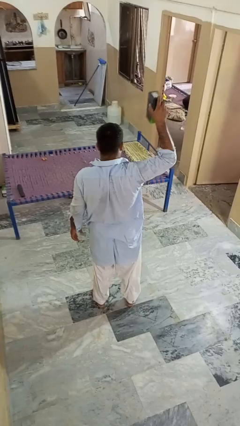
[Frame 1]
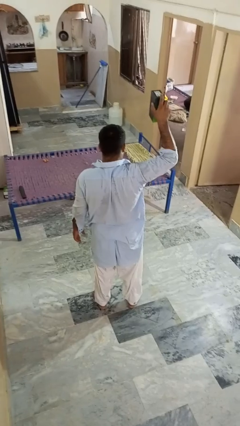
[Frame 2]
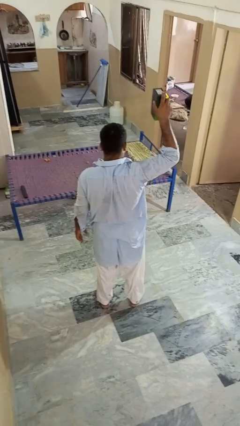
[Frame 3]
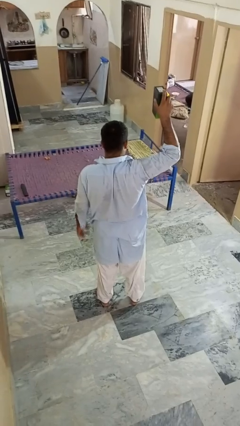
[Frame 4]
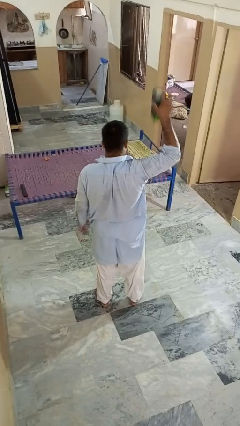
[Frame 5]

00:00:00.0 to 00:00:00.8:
person drops object

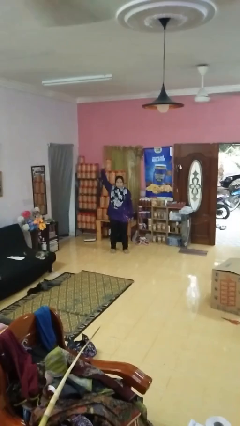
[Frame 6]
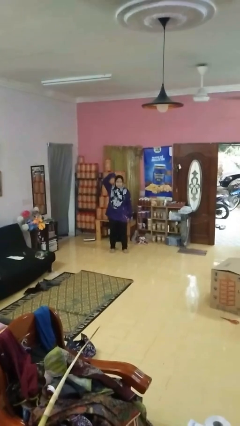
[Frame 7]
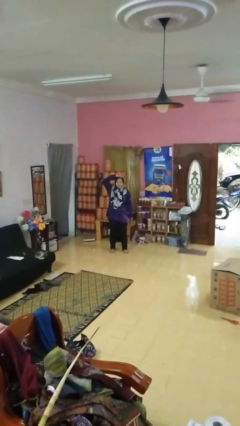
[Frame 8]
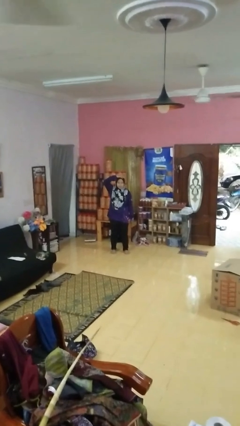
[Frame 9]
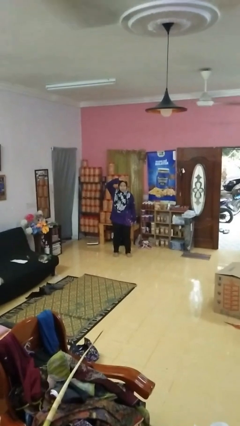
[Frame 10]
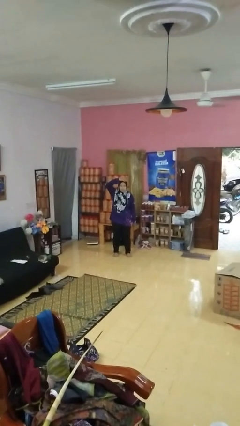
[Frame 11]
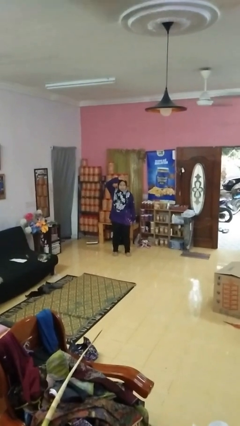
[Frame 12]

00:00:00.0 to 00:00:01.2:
person pats head

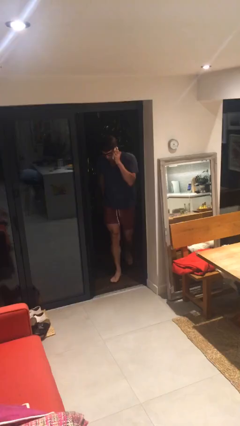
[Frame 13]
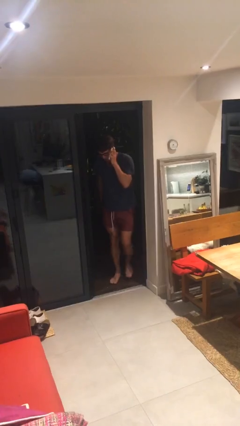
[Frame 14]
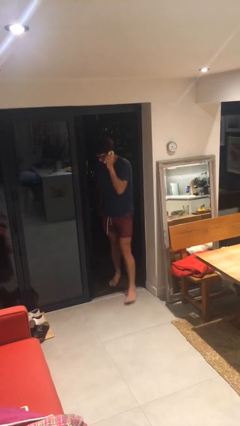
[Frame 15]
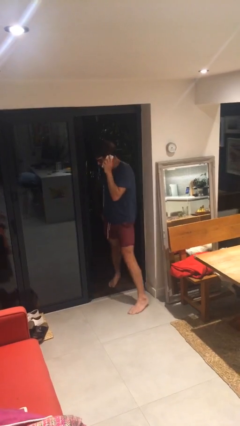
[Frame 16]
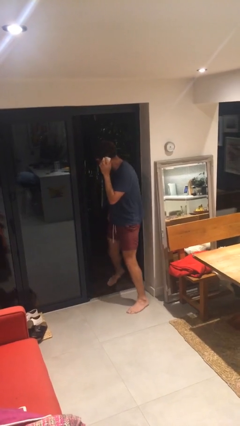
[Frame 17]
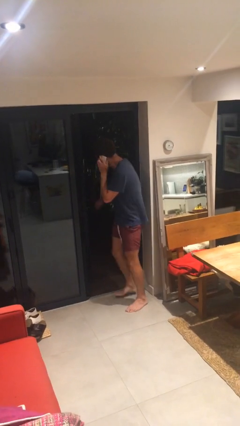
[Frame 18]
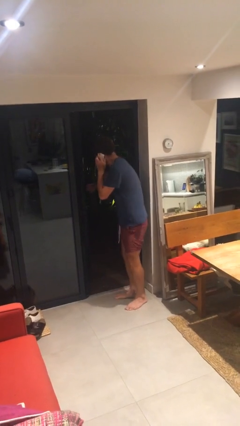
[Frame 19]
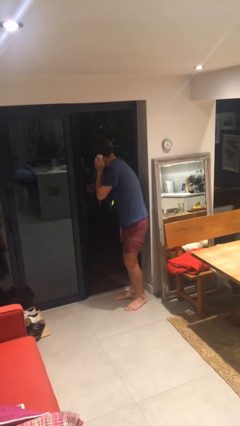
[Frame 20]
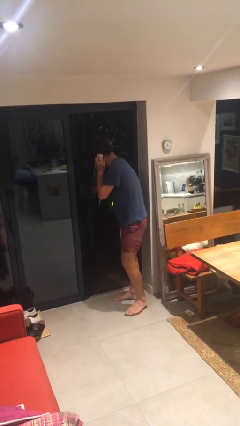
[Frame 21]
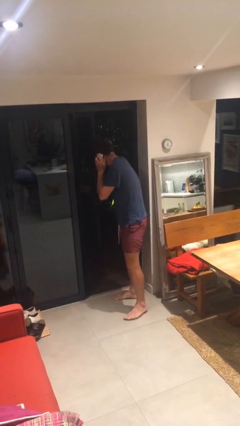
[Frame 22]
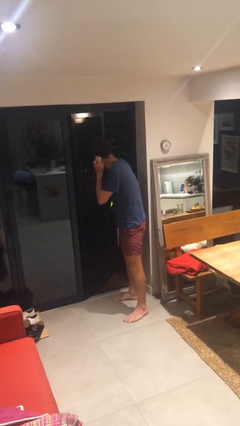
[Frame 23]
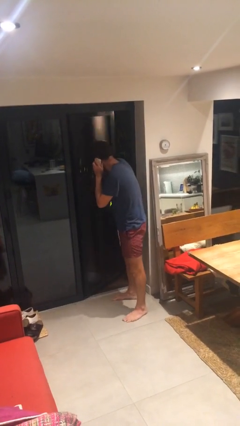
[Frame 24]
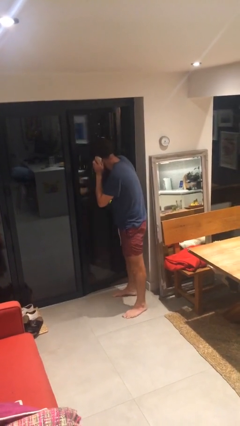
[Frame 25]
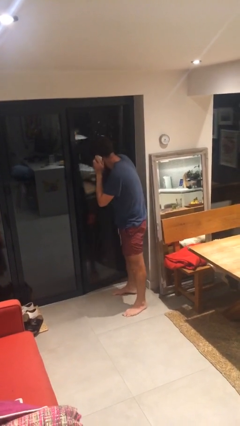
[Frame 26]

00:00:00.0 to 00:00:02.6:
person enters scene through structure

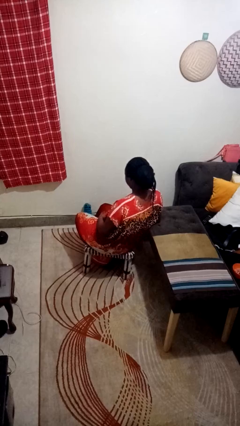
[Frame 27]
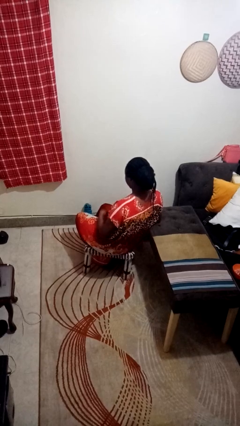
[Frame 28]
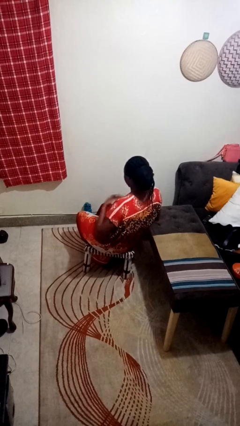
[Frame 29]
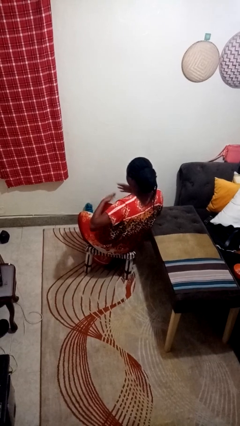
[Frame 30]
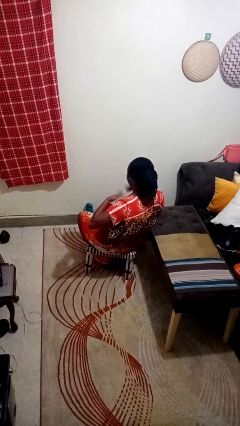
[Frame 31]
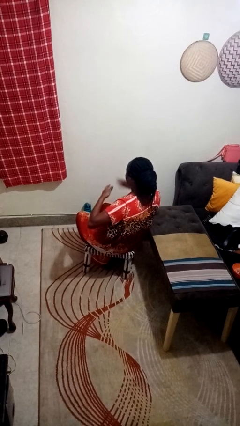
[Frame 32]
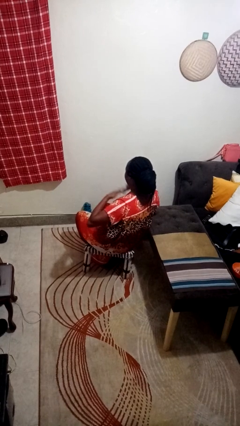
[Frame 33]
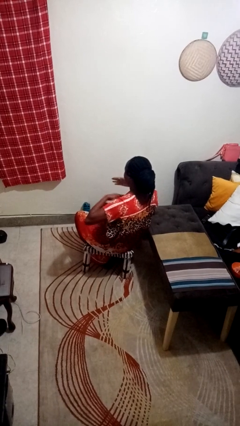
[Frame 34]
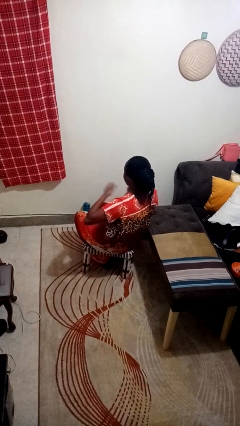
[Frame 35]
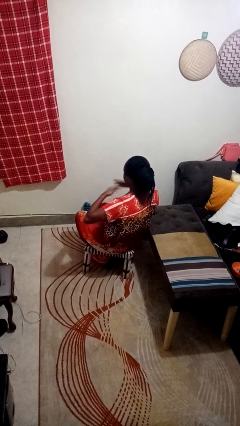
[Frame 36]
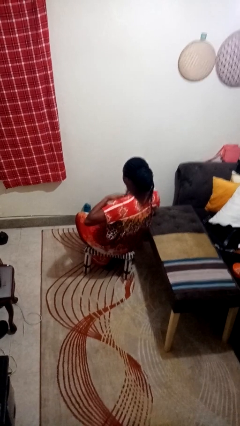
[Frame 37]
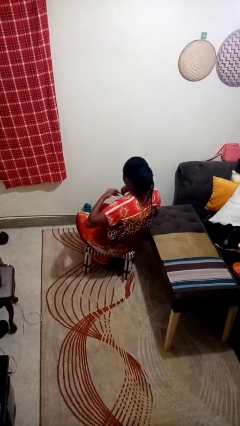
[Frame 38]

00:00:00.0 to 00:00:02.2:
person drums on chest

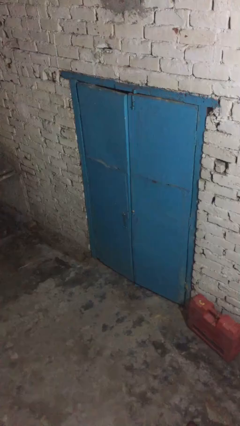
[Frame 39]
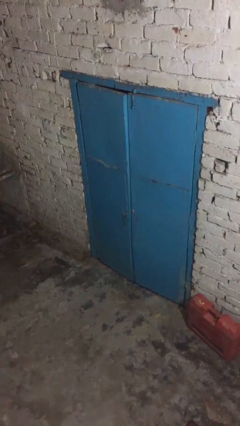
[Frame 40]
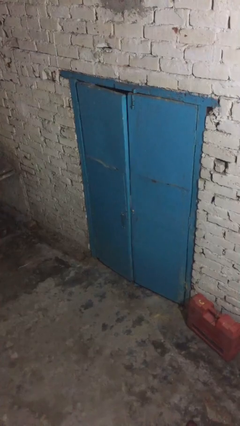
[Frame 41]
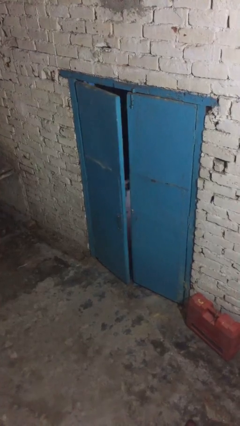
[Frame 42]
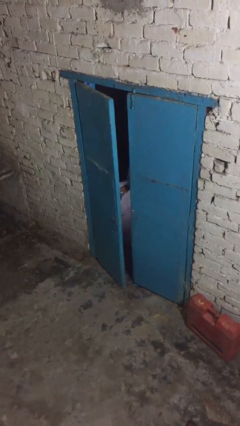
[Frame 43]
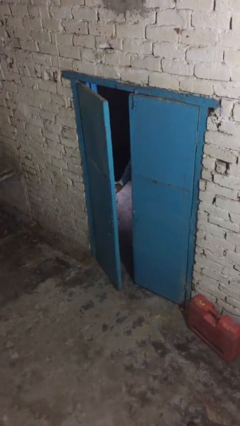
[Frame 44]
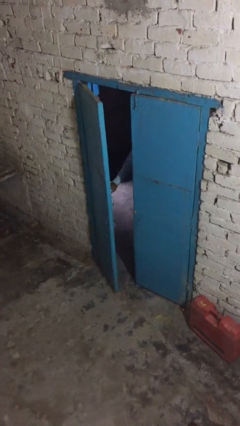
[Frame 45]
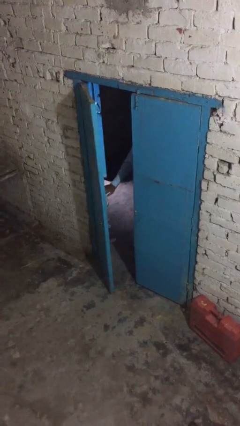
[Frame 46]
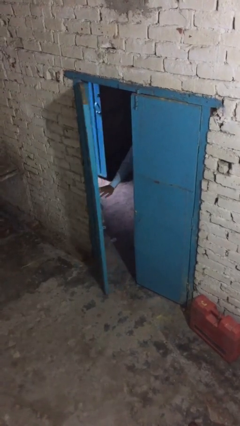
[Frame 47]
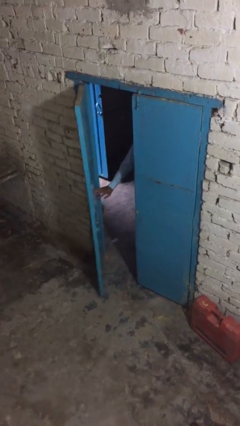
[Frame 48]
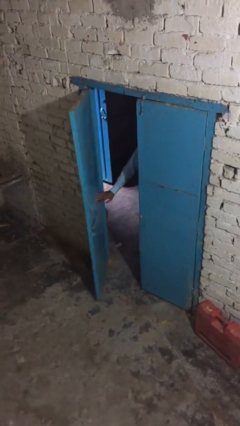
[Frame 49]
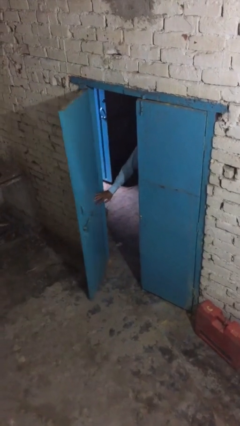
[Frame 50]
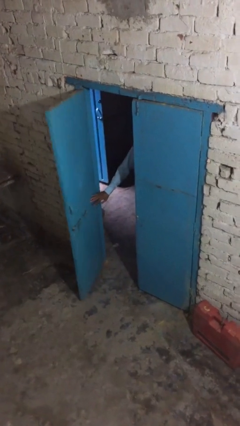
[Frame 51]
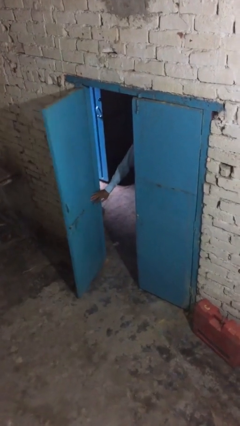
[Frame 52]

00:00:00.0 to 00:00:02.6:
person opens facility door

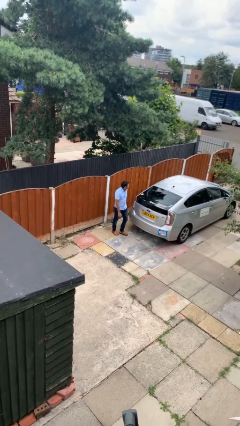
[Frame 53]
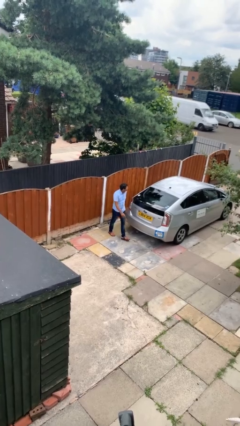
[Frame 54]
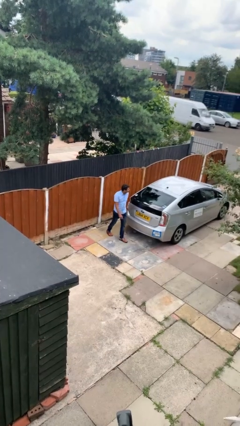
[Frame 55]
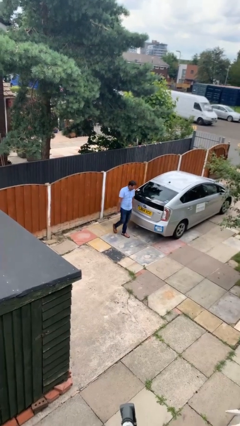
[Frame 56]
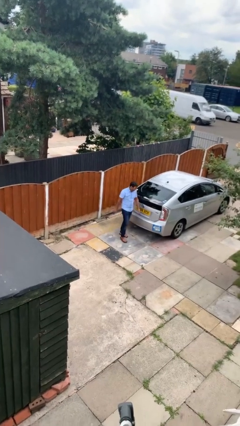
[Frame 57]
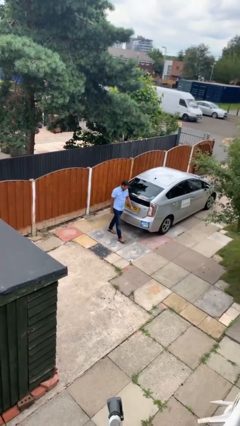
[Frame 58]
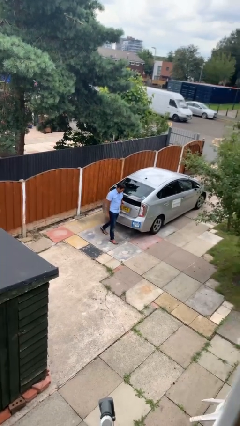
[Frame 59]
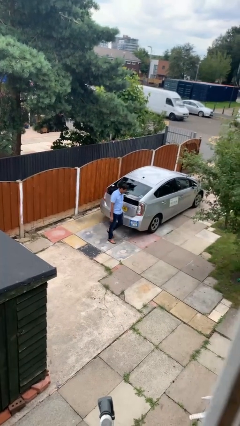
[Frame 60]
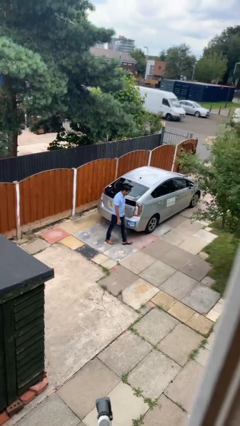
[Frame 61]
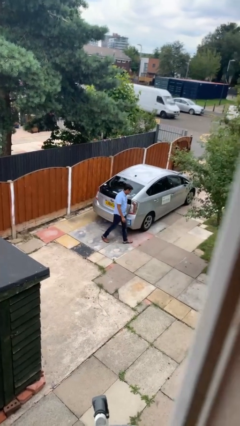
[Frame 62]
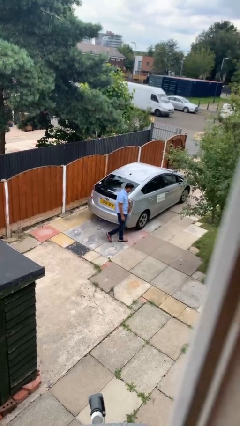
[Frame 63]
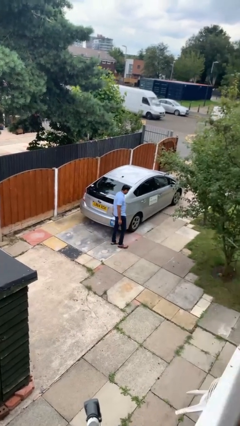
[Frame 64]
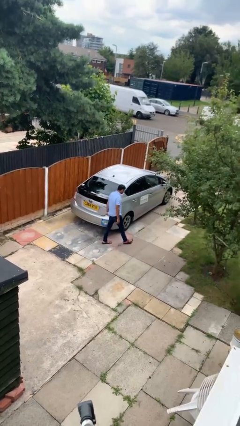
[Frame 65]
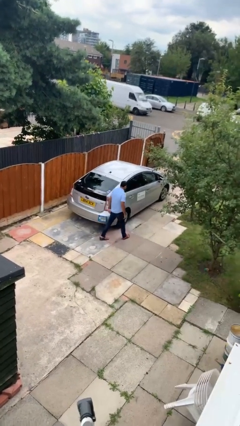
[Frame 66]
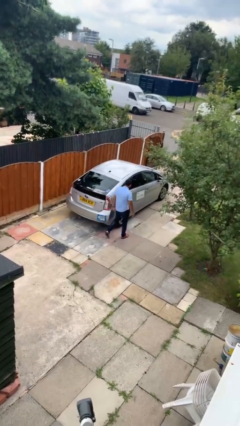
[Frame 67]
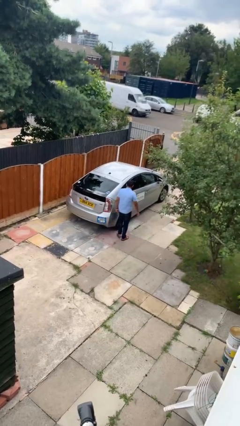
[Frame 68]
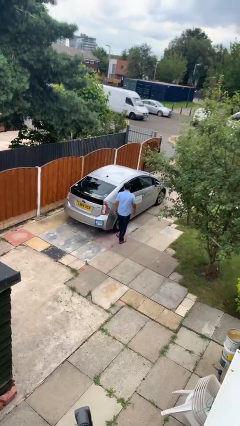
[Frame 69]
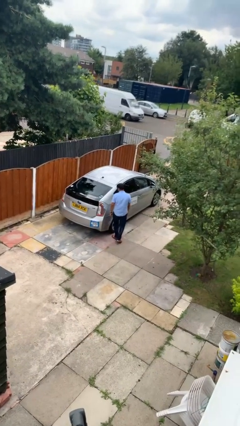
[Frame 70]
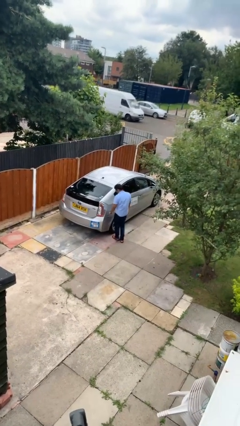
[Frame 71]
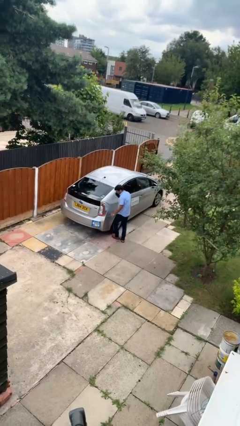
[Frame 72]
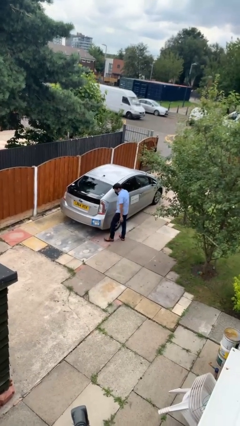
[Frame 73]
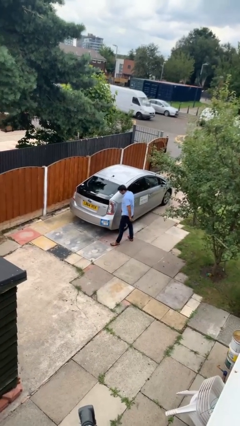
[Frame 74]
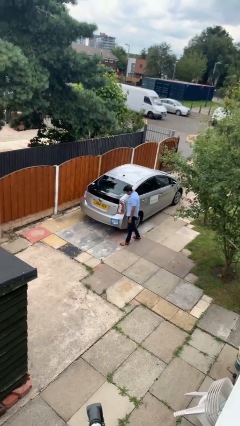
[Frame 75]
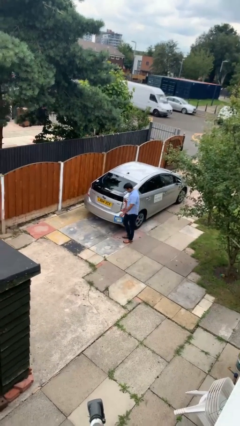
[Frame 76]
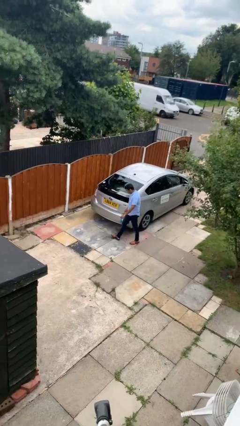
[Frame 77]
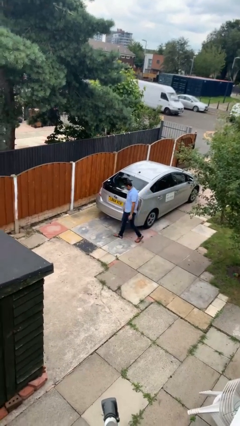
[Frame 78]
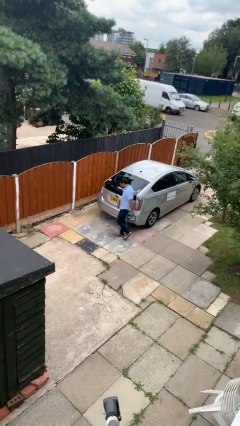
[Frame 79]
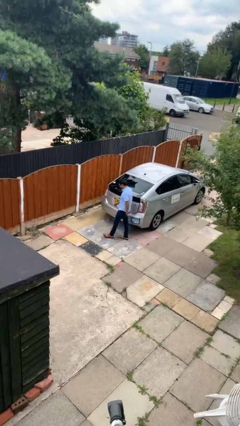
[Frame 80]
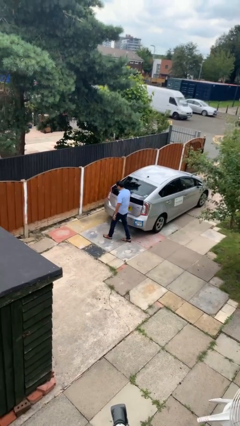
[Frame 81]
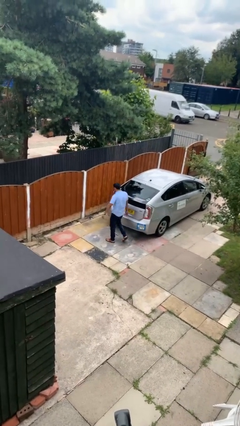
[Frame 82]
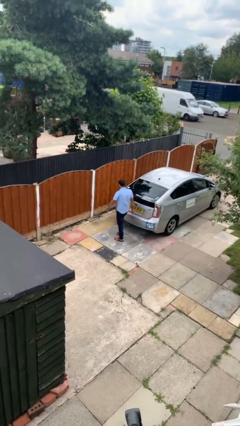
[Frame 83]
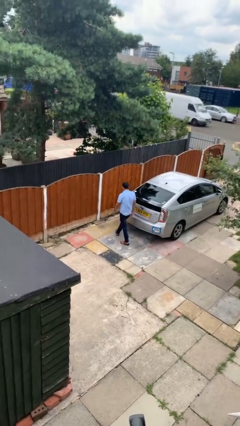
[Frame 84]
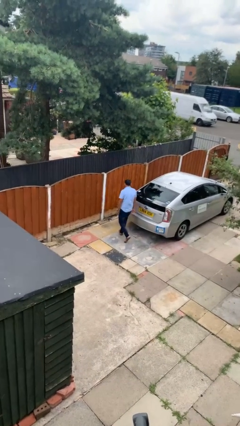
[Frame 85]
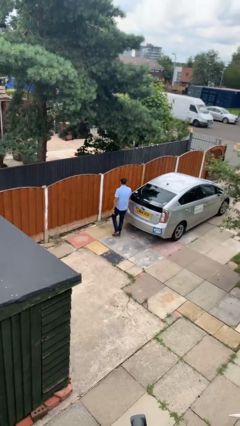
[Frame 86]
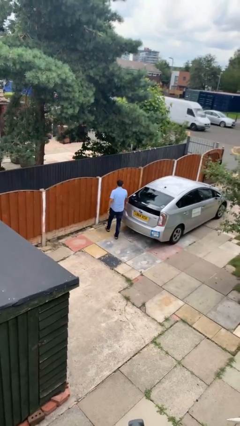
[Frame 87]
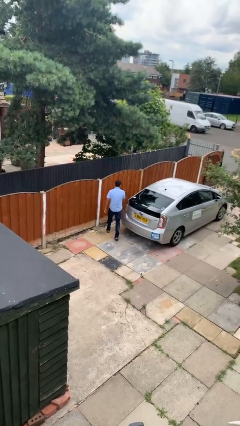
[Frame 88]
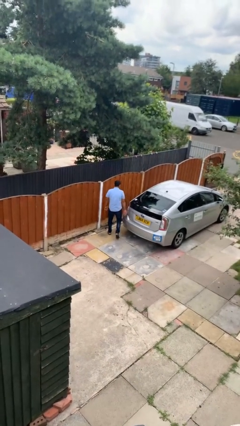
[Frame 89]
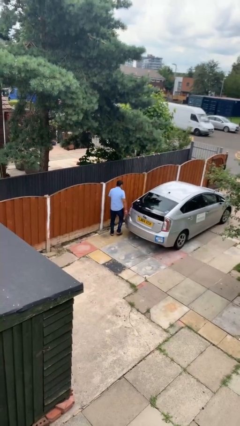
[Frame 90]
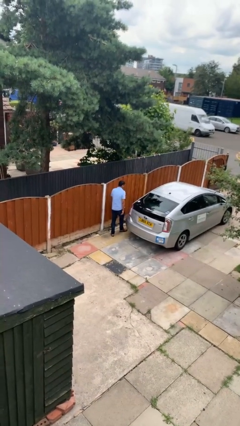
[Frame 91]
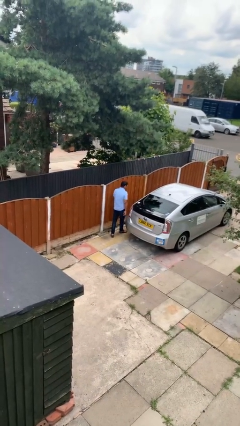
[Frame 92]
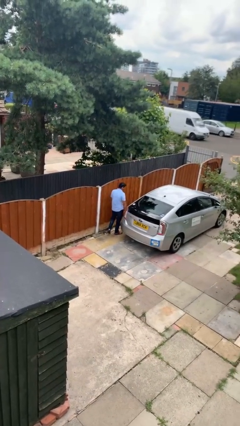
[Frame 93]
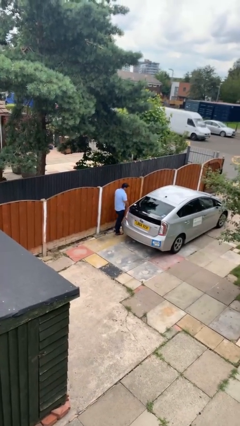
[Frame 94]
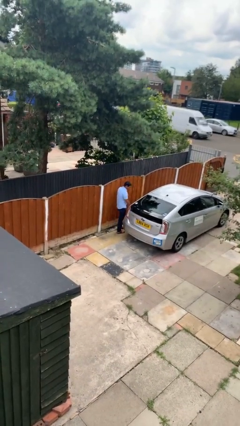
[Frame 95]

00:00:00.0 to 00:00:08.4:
person walks around car
